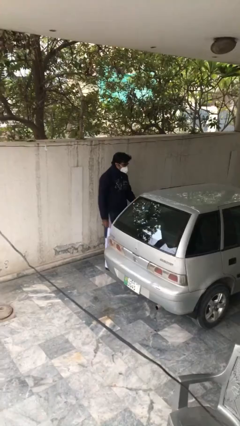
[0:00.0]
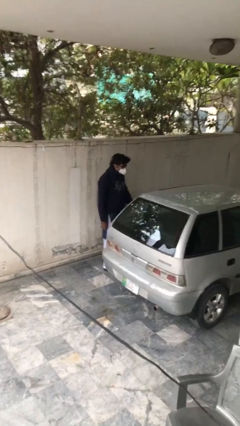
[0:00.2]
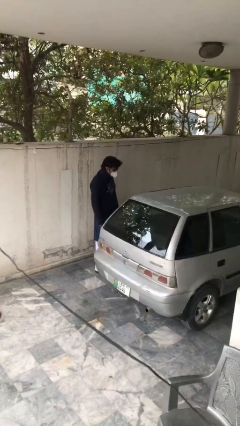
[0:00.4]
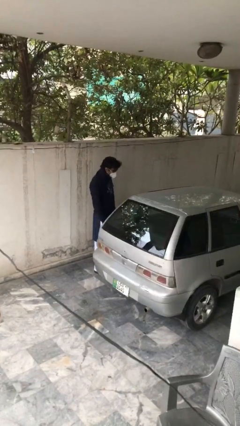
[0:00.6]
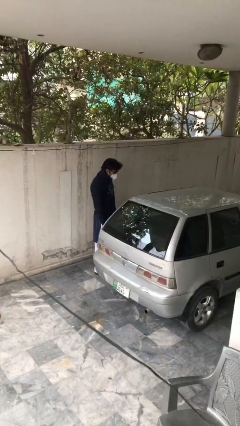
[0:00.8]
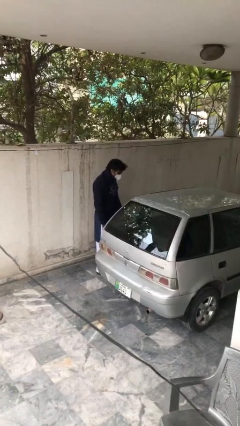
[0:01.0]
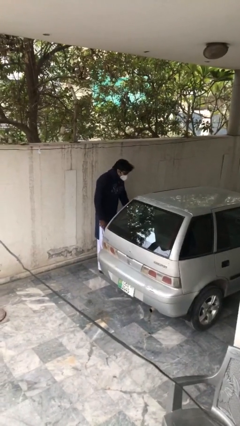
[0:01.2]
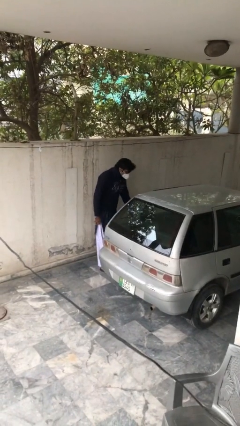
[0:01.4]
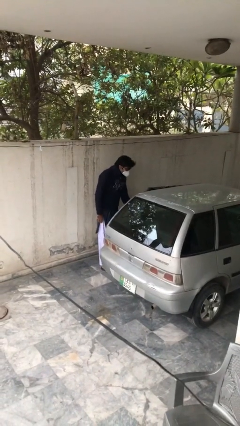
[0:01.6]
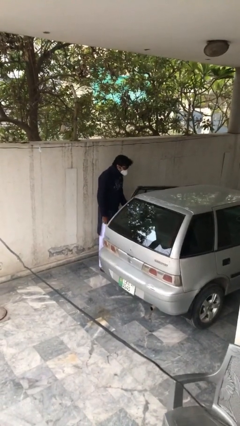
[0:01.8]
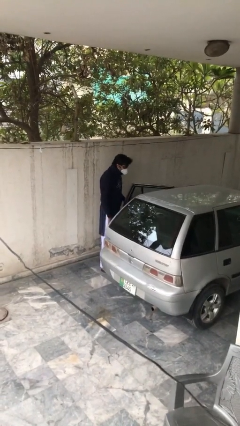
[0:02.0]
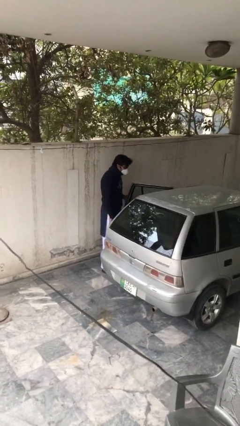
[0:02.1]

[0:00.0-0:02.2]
person opens car door

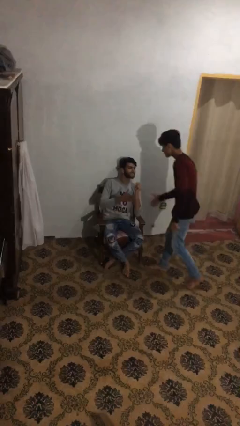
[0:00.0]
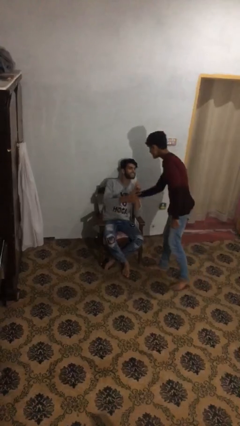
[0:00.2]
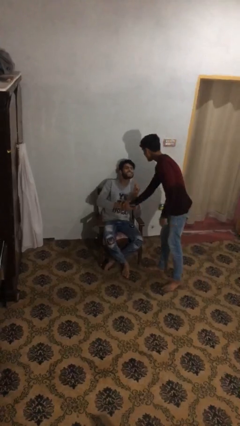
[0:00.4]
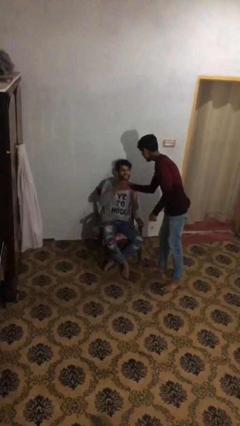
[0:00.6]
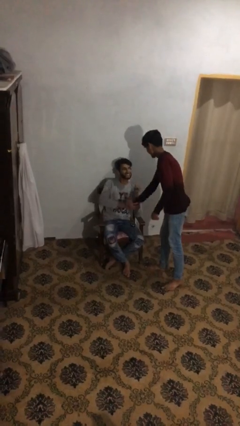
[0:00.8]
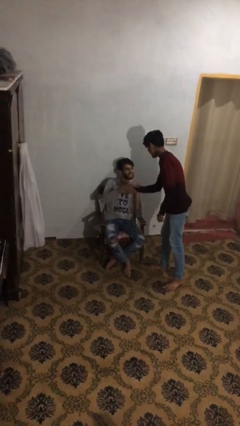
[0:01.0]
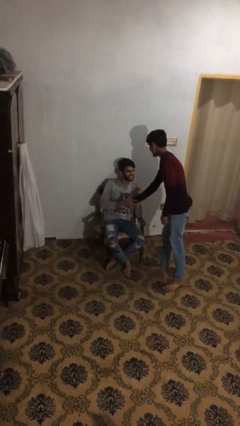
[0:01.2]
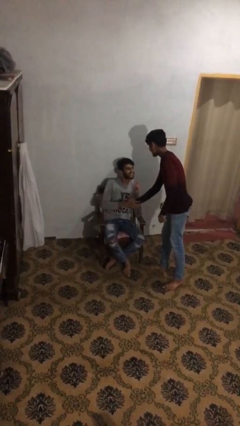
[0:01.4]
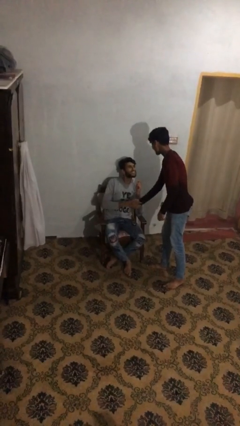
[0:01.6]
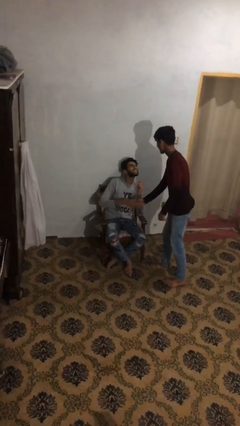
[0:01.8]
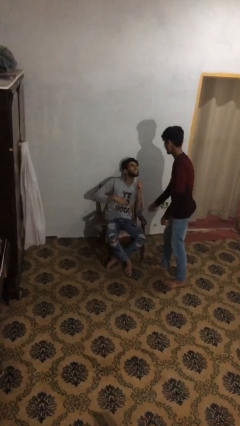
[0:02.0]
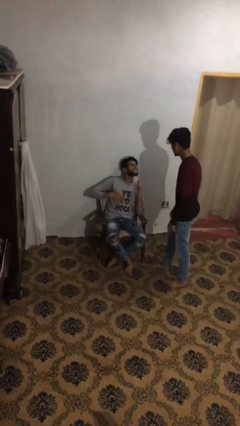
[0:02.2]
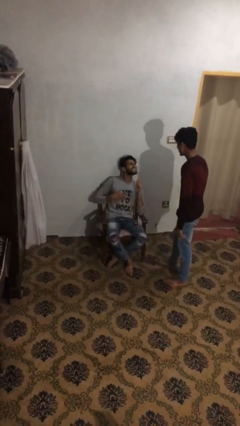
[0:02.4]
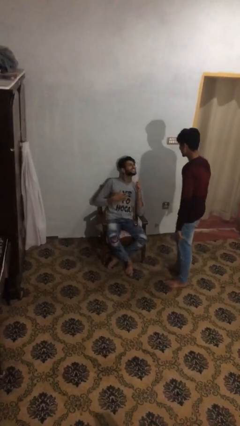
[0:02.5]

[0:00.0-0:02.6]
person shakes hand

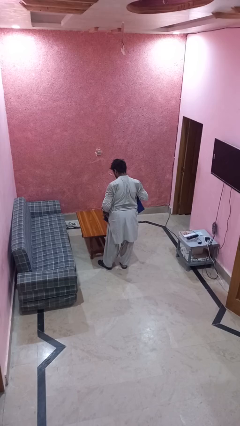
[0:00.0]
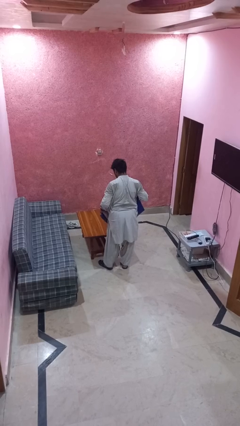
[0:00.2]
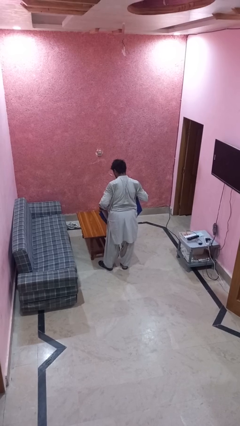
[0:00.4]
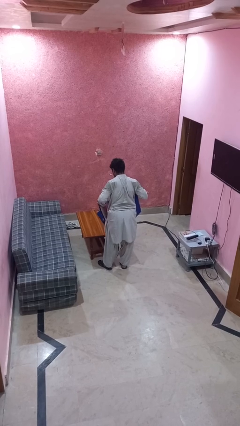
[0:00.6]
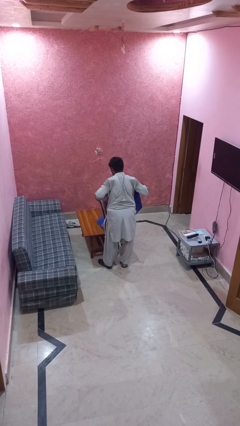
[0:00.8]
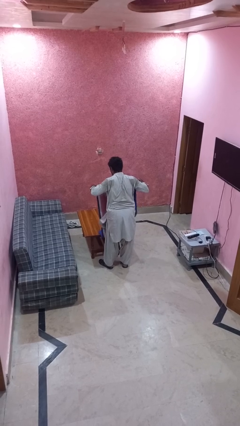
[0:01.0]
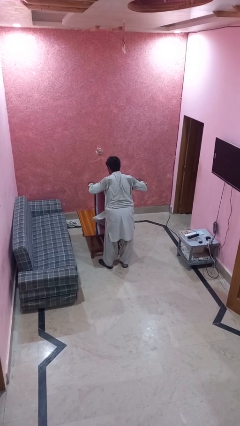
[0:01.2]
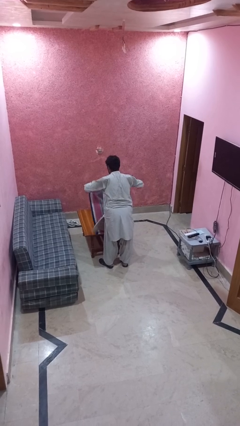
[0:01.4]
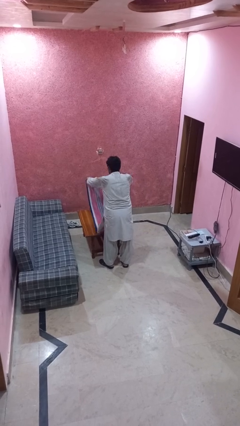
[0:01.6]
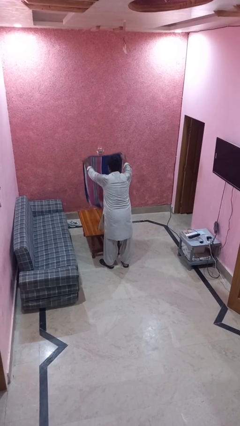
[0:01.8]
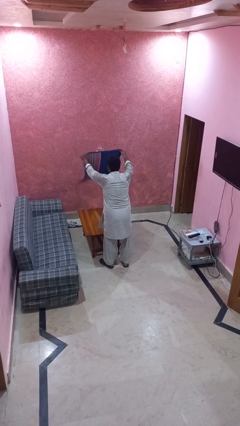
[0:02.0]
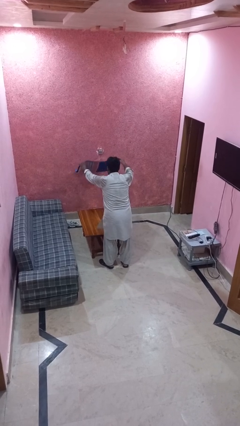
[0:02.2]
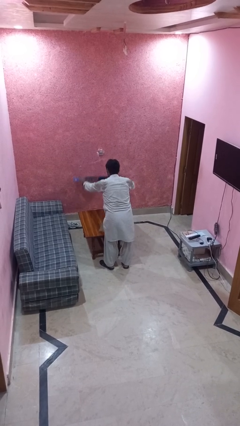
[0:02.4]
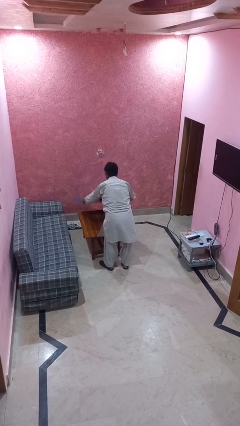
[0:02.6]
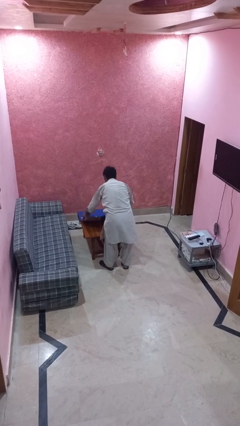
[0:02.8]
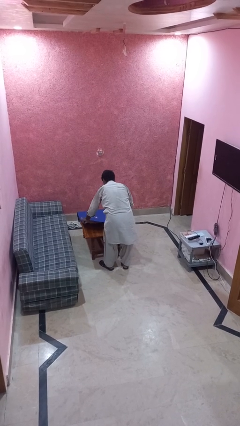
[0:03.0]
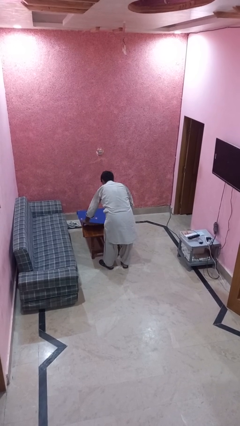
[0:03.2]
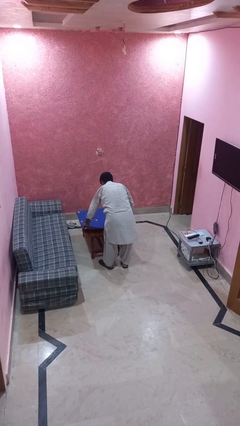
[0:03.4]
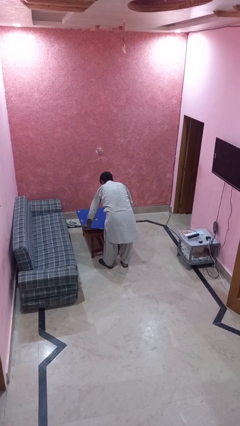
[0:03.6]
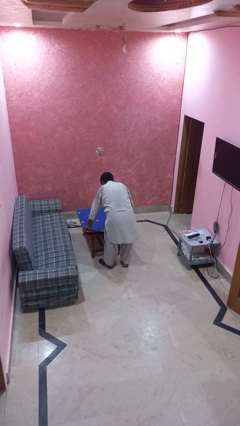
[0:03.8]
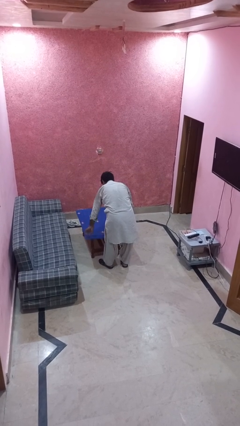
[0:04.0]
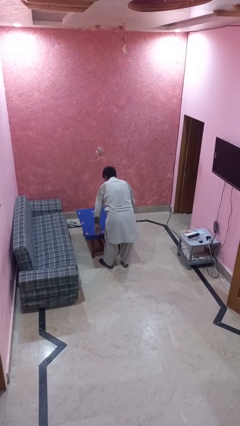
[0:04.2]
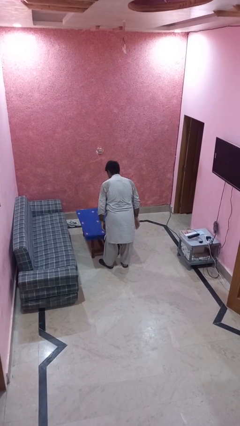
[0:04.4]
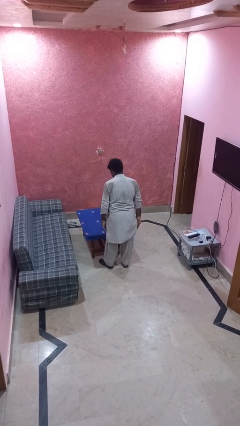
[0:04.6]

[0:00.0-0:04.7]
person spreads tablecloth

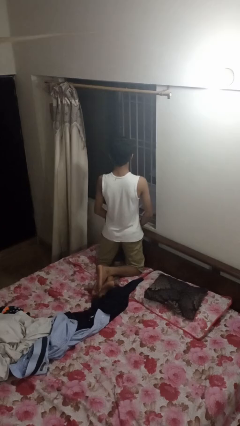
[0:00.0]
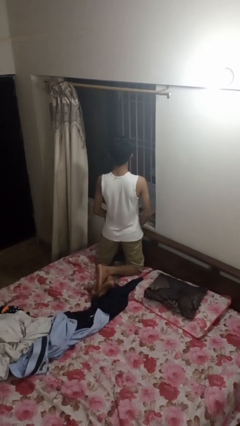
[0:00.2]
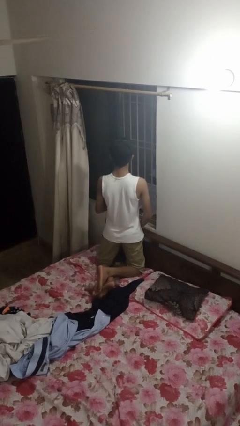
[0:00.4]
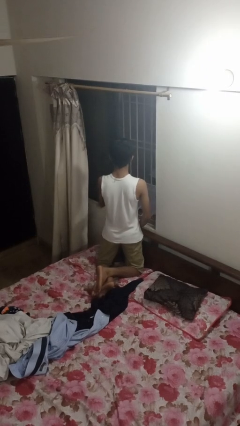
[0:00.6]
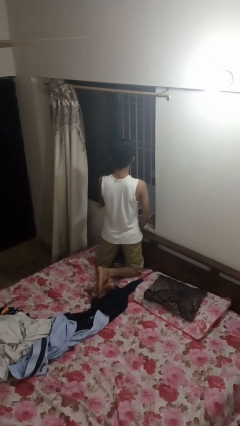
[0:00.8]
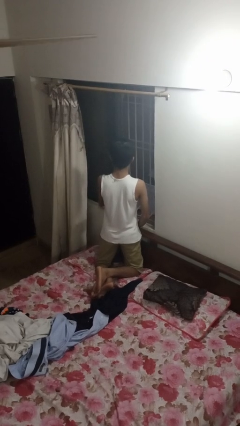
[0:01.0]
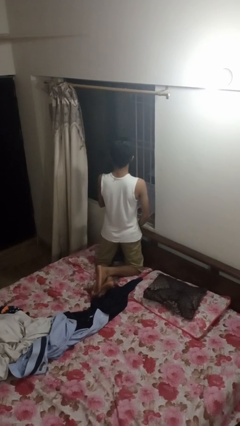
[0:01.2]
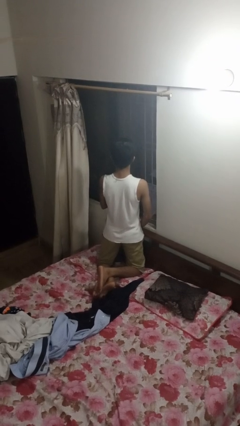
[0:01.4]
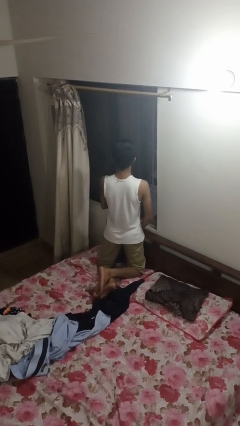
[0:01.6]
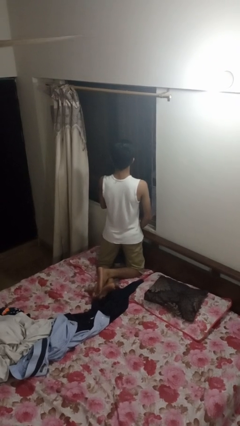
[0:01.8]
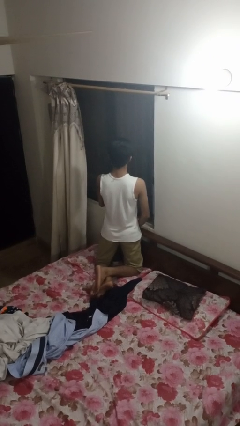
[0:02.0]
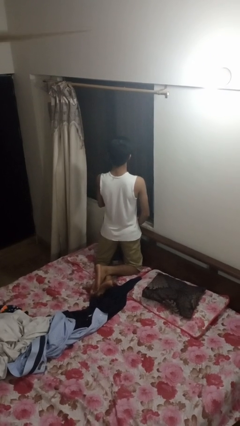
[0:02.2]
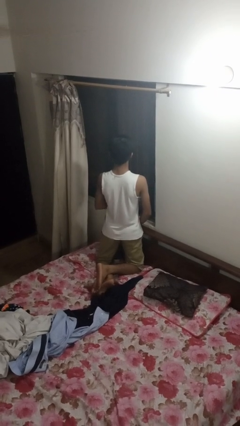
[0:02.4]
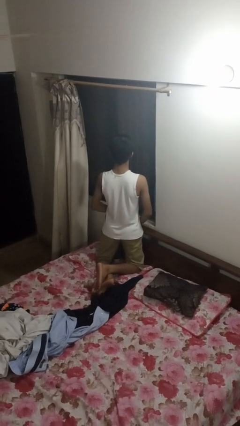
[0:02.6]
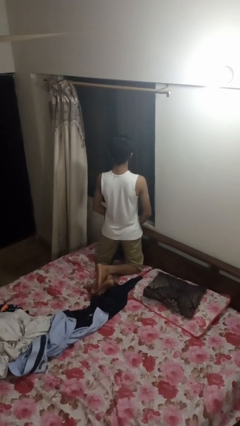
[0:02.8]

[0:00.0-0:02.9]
person closes home window

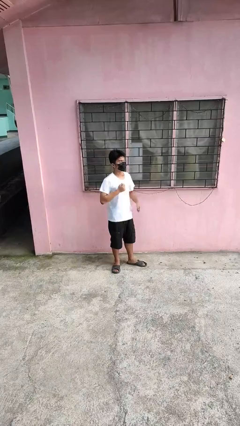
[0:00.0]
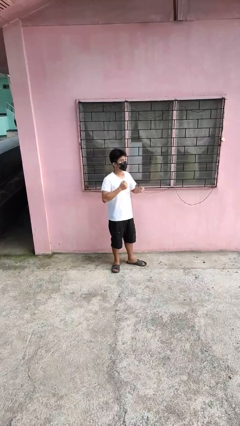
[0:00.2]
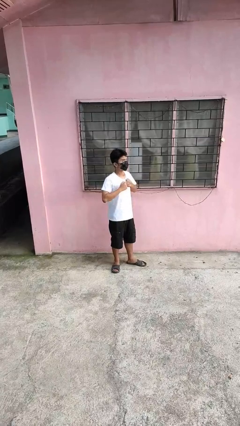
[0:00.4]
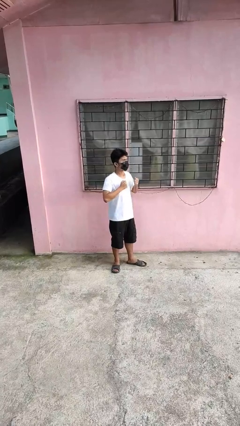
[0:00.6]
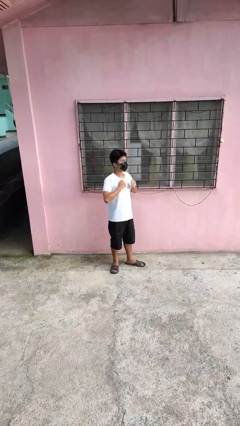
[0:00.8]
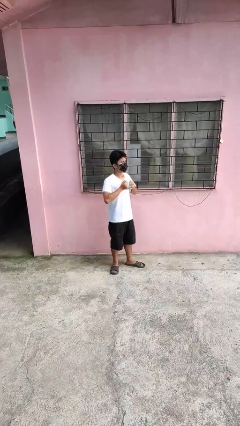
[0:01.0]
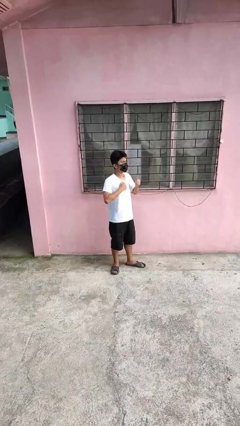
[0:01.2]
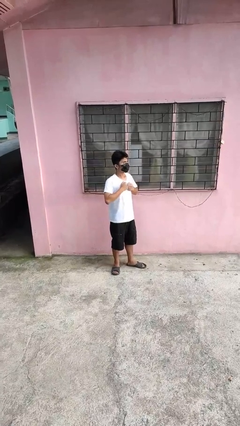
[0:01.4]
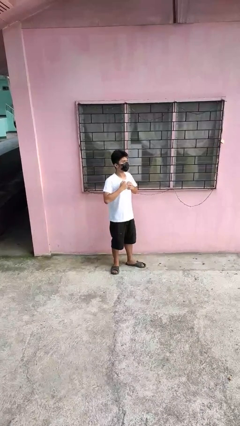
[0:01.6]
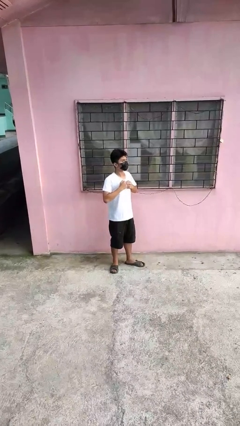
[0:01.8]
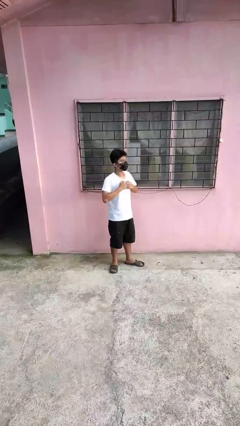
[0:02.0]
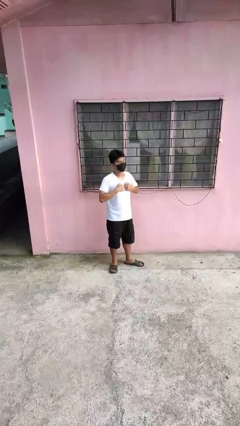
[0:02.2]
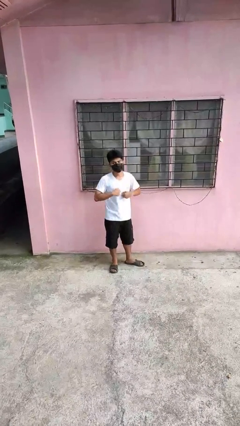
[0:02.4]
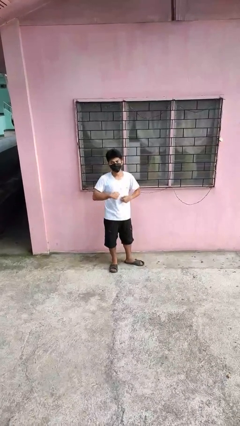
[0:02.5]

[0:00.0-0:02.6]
person drums on chest

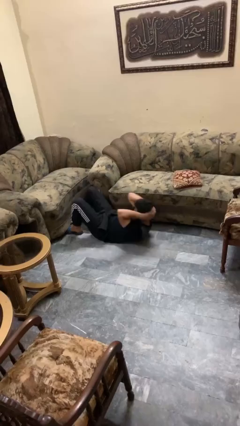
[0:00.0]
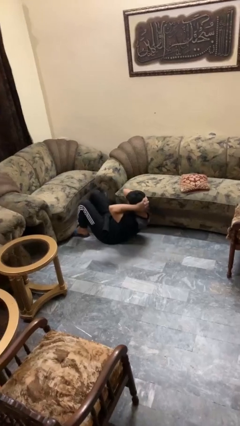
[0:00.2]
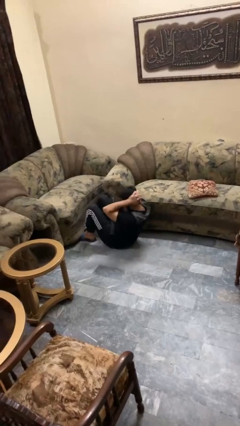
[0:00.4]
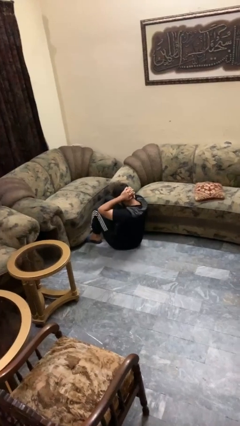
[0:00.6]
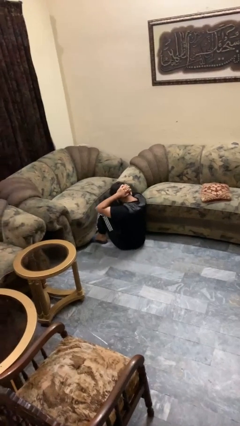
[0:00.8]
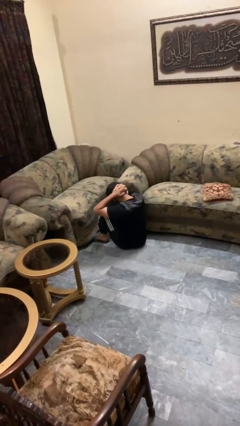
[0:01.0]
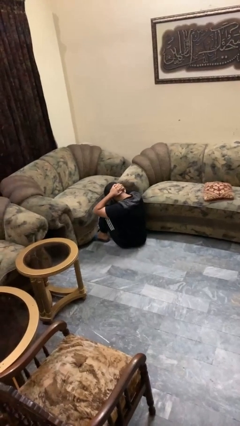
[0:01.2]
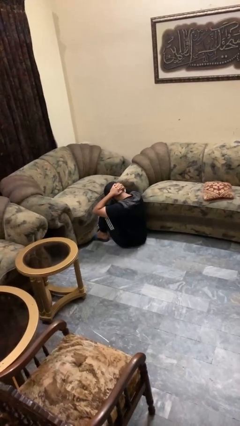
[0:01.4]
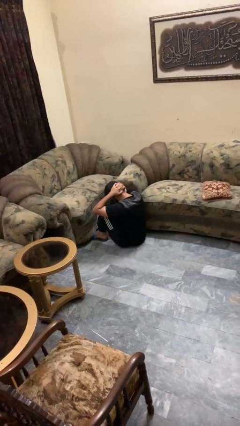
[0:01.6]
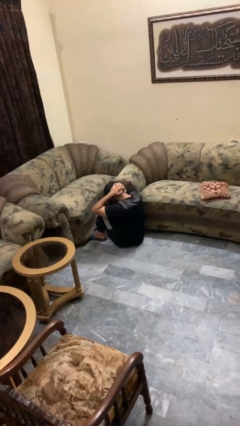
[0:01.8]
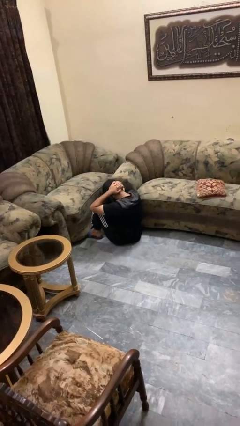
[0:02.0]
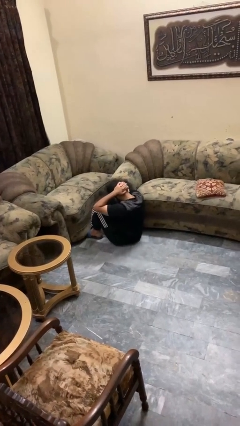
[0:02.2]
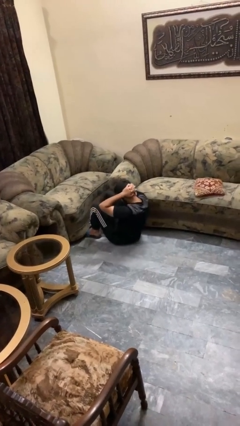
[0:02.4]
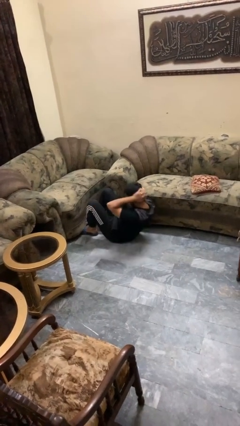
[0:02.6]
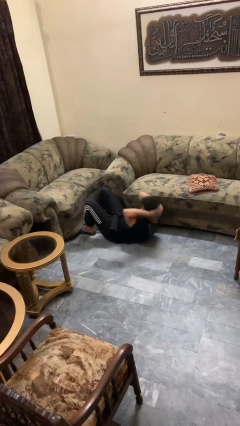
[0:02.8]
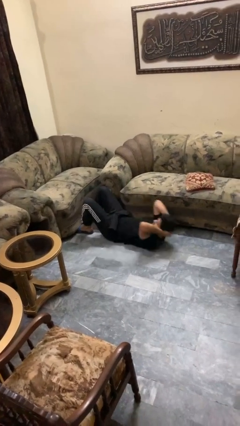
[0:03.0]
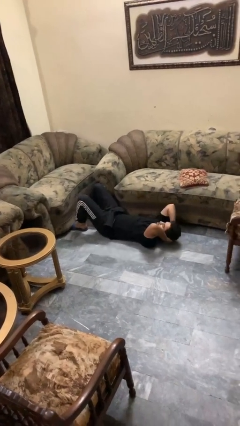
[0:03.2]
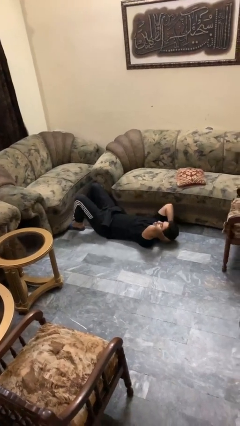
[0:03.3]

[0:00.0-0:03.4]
person exercises with situp
